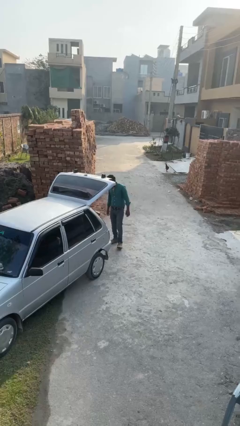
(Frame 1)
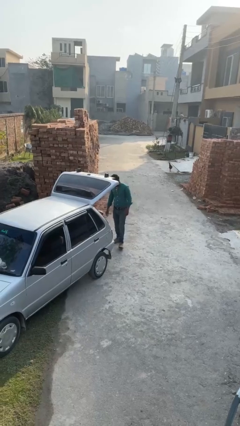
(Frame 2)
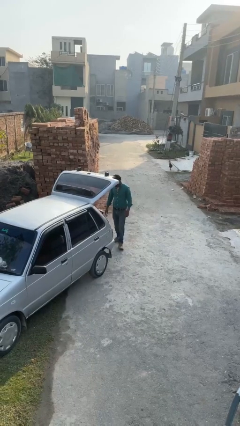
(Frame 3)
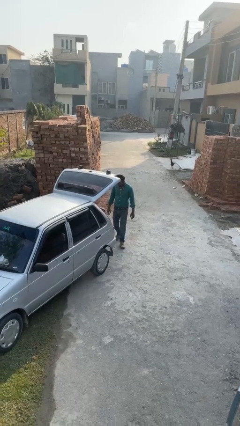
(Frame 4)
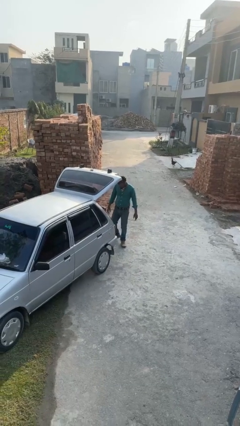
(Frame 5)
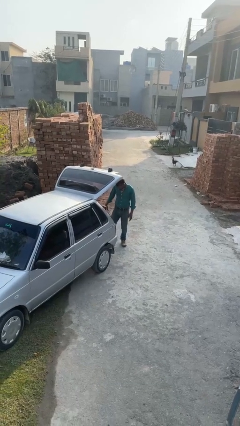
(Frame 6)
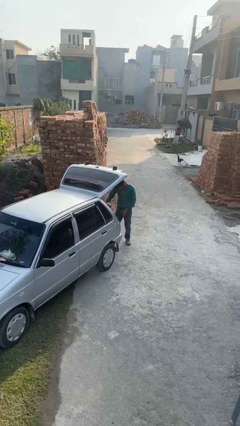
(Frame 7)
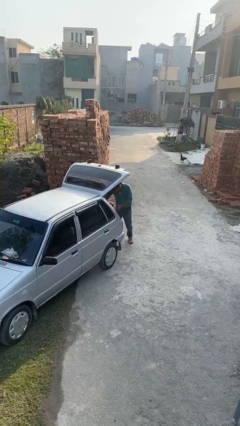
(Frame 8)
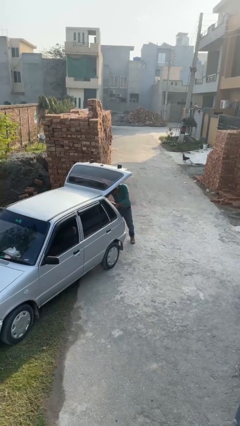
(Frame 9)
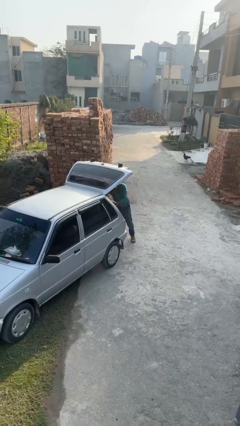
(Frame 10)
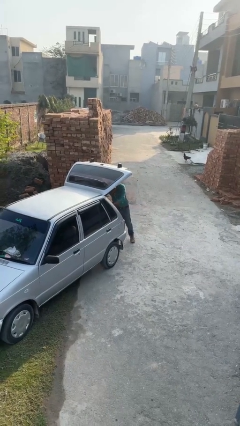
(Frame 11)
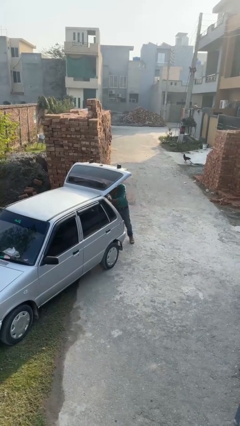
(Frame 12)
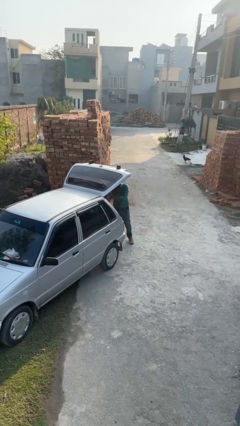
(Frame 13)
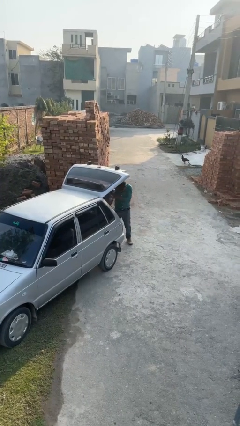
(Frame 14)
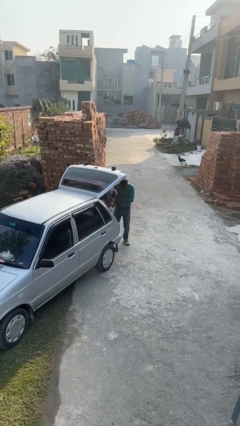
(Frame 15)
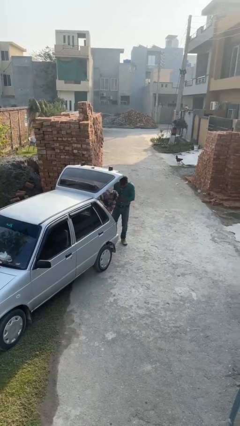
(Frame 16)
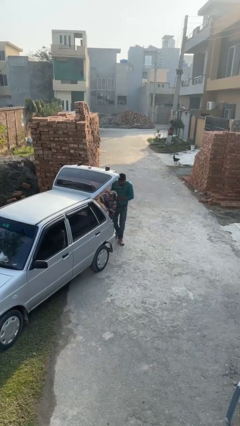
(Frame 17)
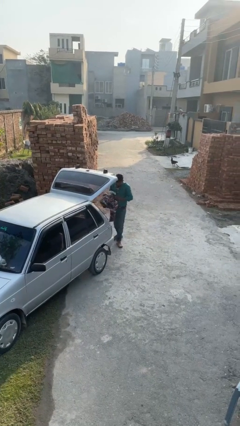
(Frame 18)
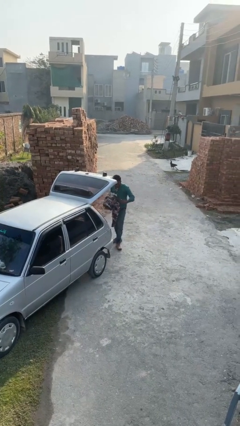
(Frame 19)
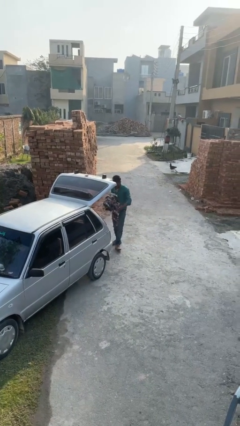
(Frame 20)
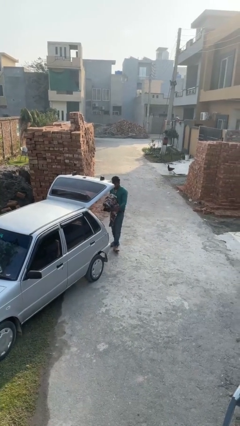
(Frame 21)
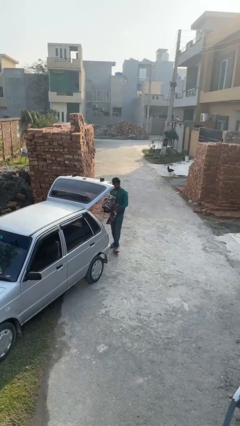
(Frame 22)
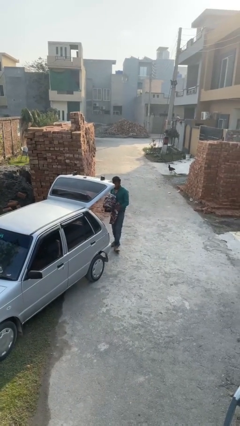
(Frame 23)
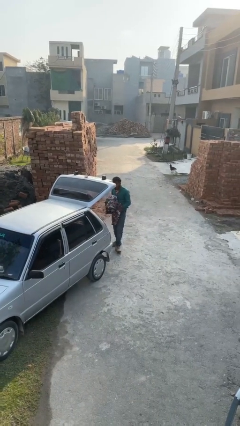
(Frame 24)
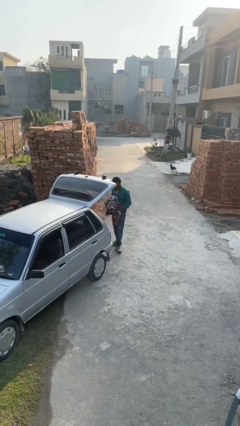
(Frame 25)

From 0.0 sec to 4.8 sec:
person unloads car

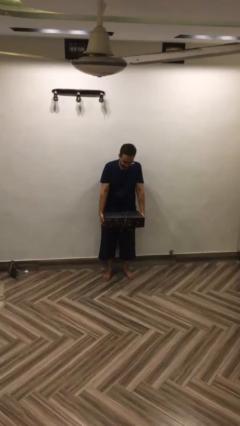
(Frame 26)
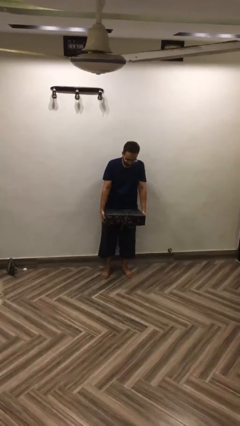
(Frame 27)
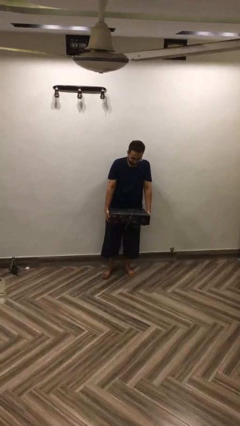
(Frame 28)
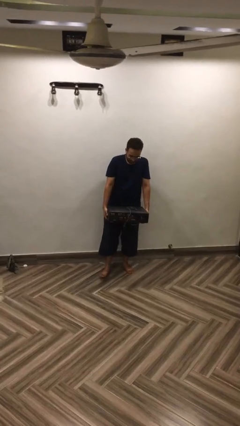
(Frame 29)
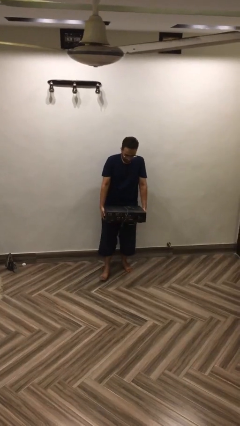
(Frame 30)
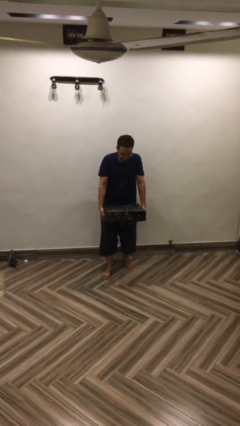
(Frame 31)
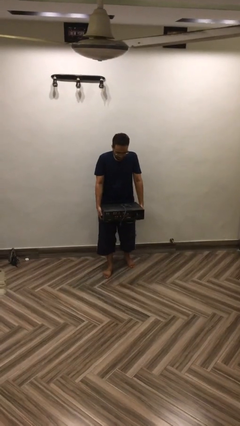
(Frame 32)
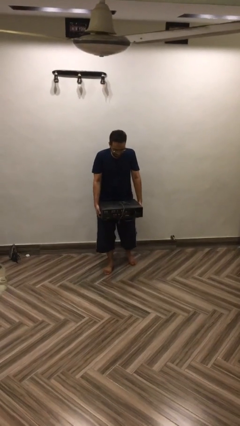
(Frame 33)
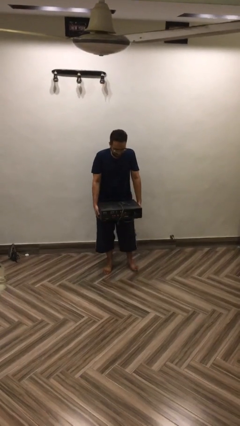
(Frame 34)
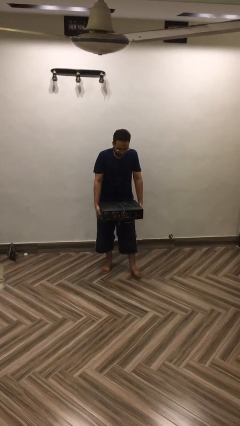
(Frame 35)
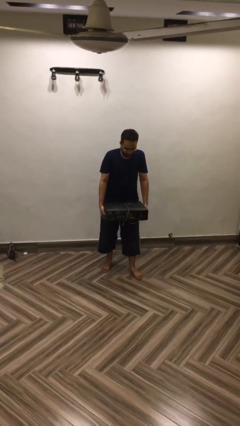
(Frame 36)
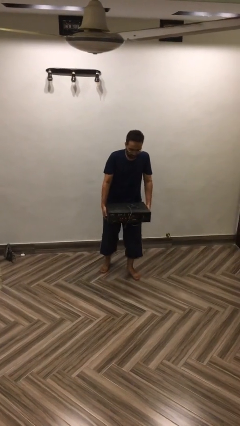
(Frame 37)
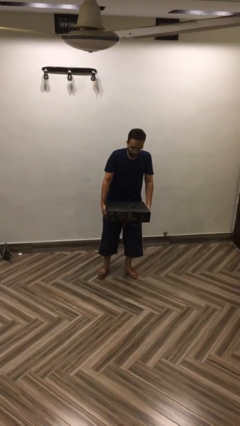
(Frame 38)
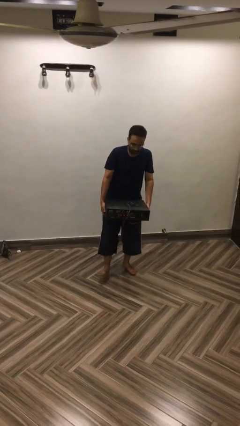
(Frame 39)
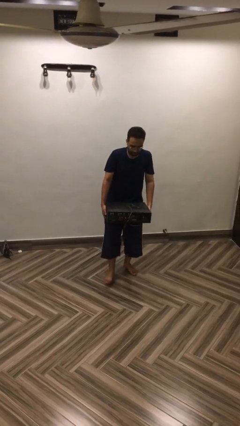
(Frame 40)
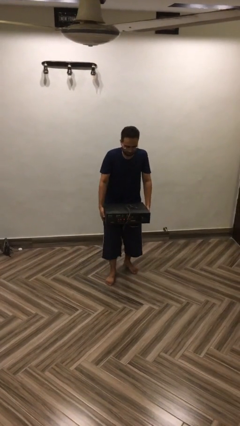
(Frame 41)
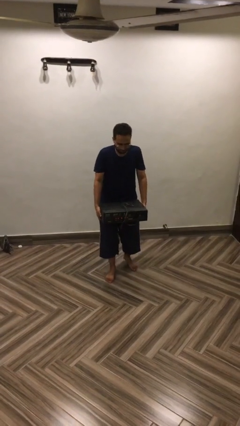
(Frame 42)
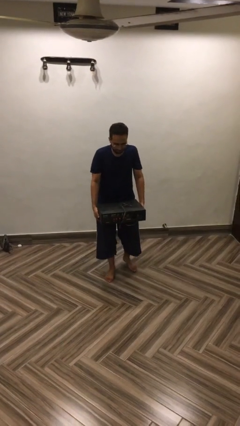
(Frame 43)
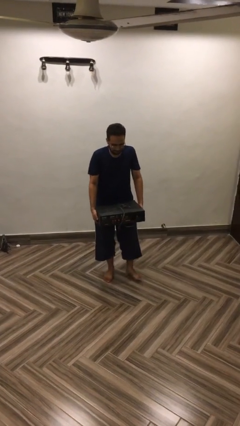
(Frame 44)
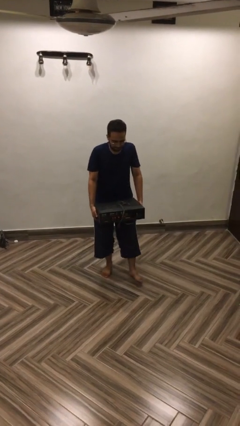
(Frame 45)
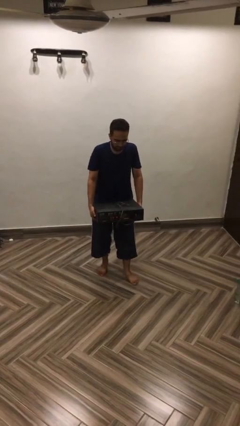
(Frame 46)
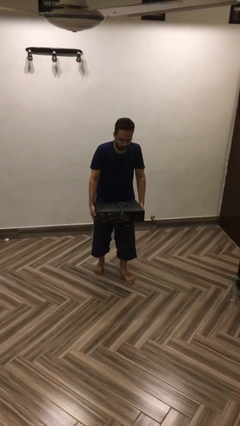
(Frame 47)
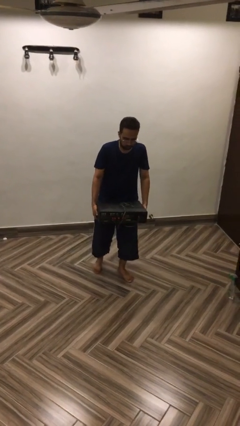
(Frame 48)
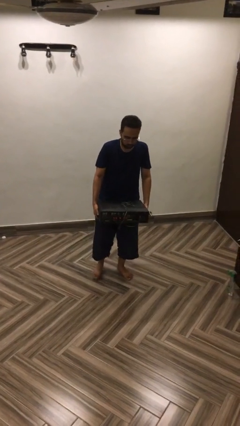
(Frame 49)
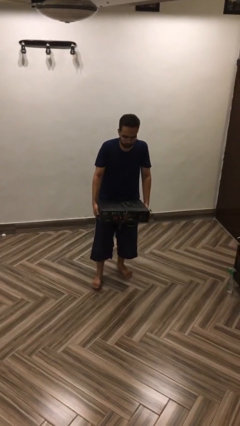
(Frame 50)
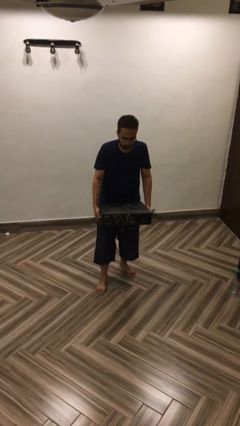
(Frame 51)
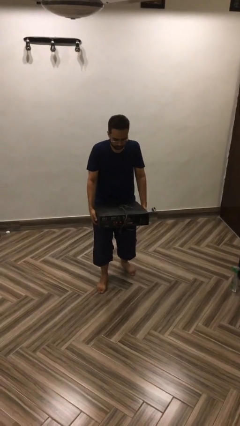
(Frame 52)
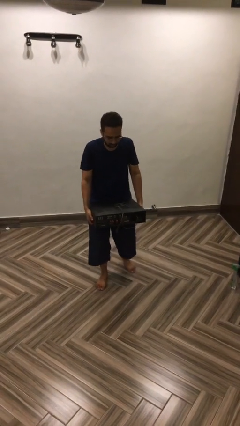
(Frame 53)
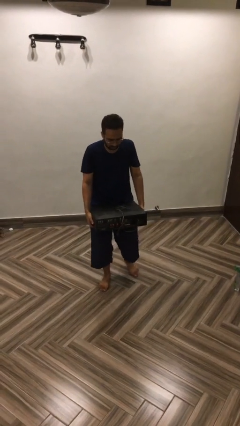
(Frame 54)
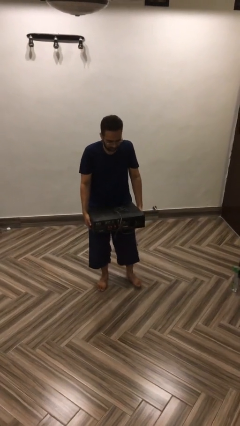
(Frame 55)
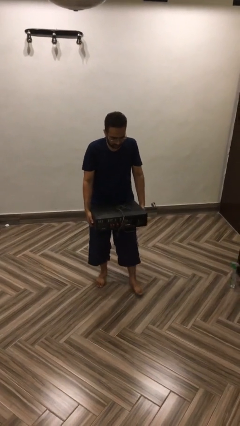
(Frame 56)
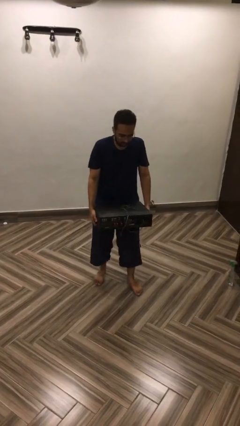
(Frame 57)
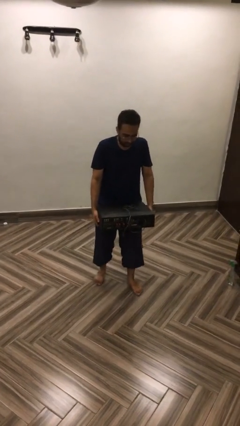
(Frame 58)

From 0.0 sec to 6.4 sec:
person carries heavy object

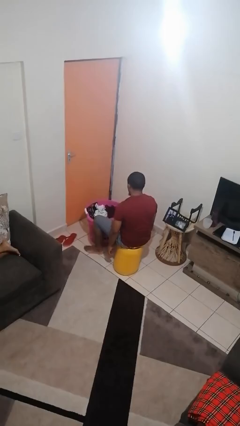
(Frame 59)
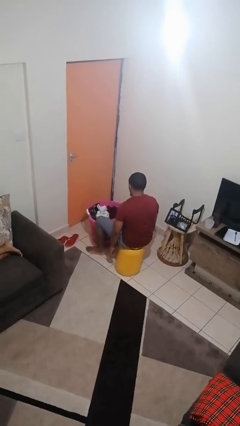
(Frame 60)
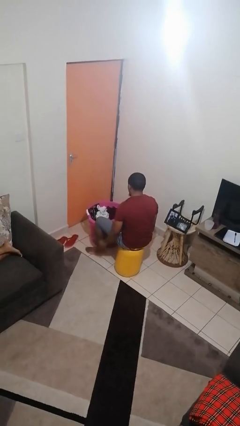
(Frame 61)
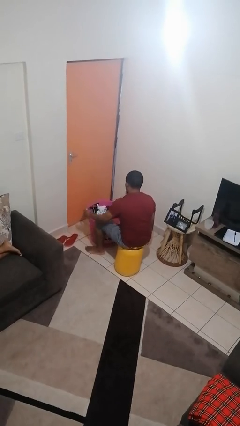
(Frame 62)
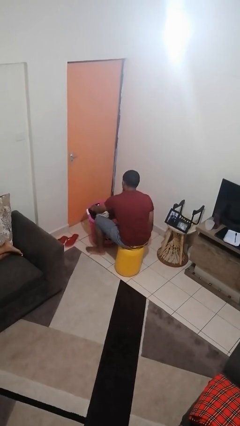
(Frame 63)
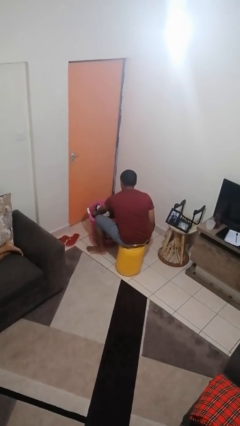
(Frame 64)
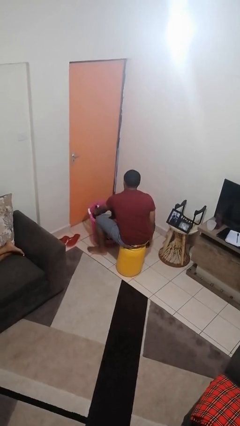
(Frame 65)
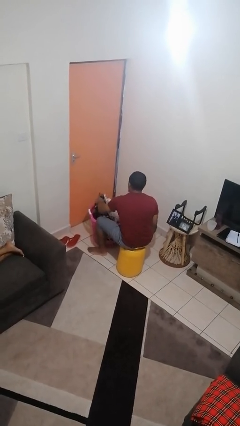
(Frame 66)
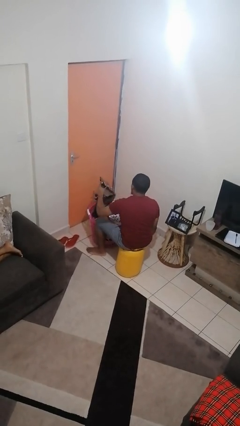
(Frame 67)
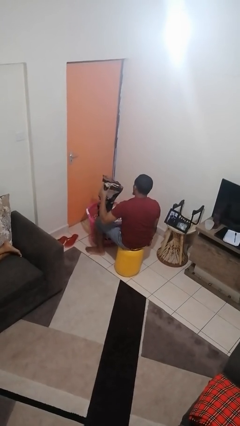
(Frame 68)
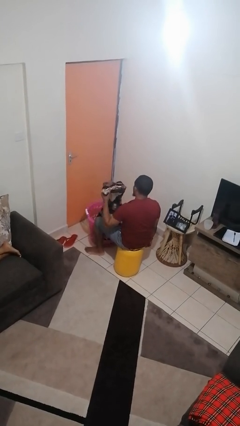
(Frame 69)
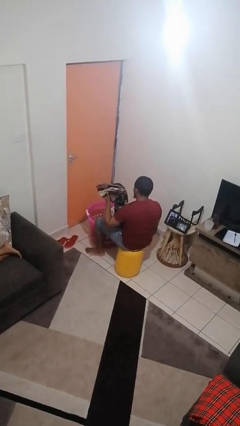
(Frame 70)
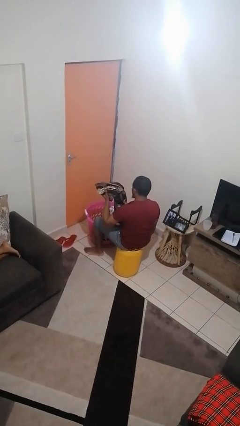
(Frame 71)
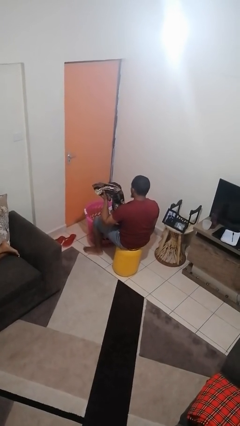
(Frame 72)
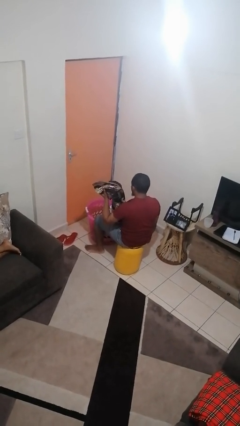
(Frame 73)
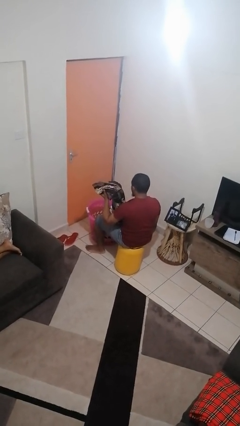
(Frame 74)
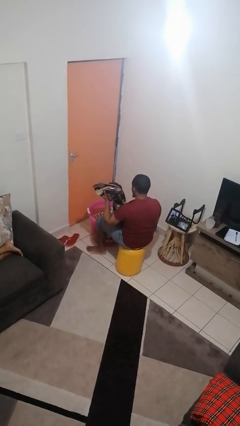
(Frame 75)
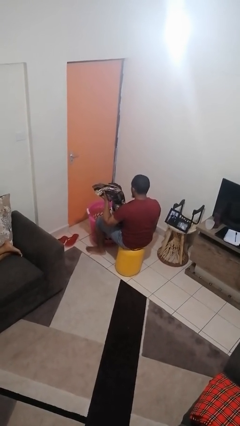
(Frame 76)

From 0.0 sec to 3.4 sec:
person takes object from basket

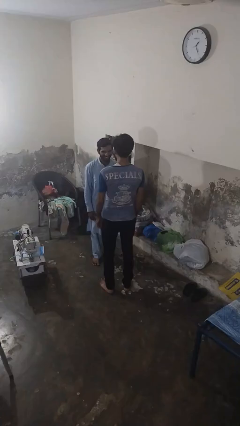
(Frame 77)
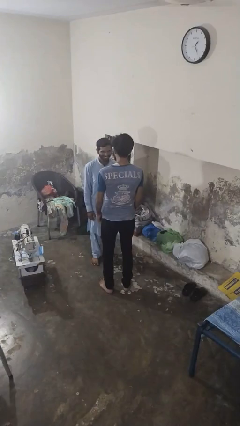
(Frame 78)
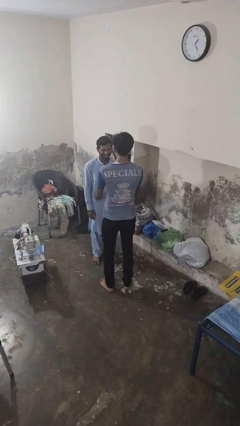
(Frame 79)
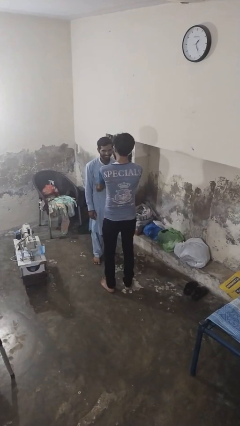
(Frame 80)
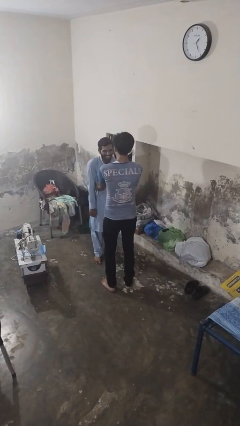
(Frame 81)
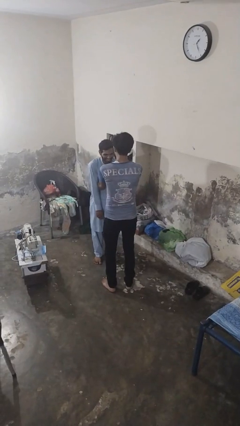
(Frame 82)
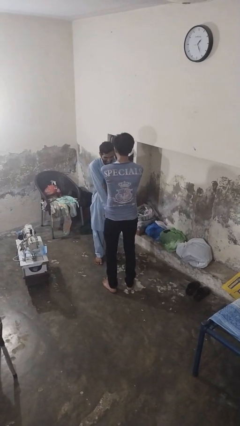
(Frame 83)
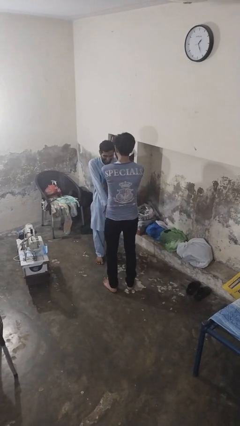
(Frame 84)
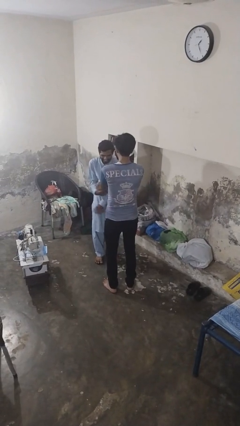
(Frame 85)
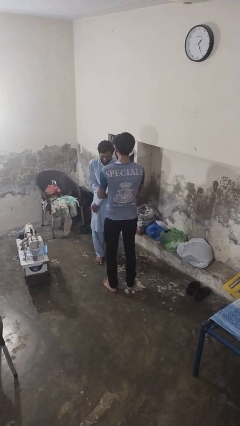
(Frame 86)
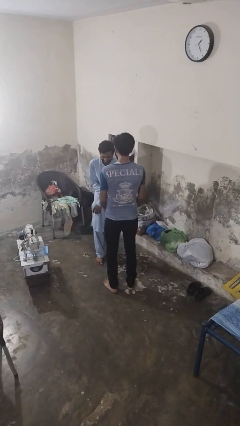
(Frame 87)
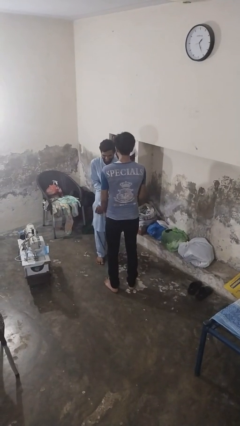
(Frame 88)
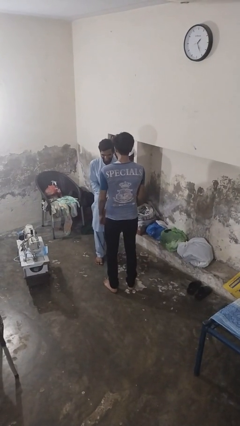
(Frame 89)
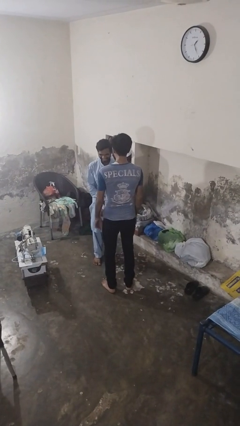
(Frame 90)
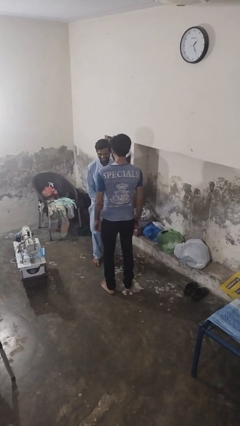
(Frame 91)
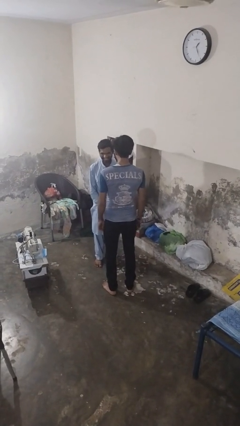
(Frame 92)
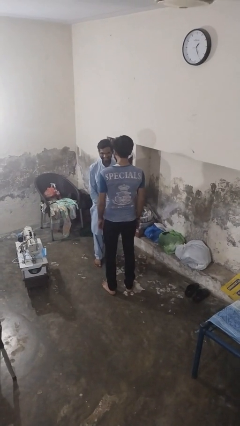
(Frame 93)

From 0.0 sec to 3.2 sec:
person tickles person
